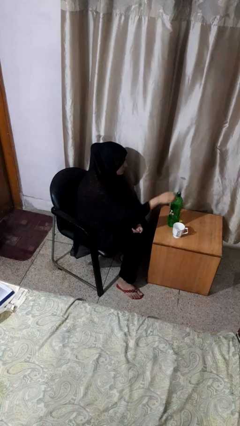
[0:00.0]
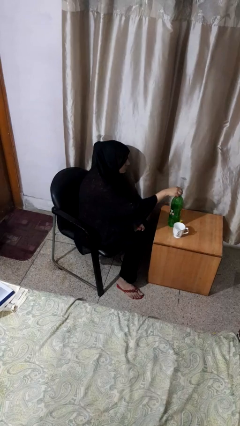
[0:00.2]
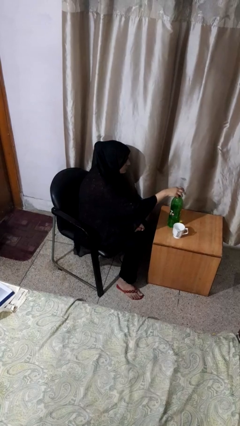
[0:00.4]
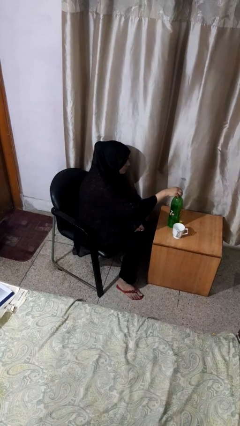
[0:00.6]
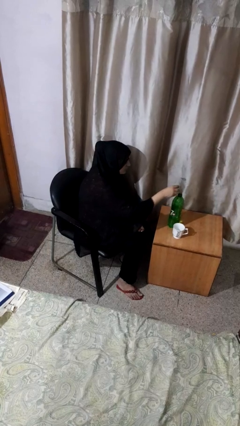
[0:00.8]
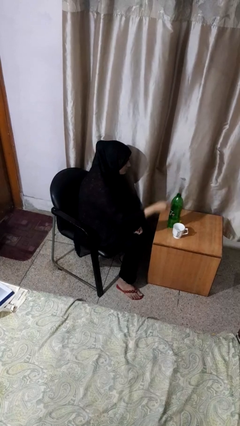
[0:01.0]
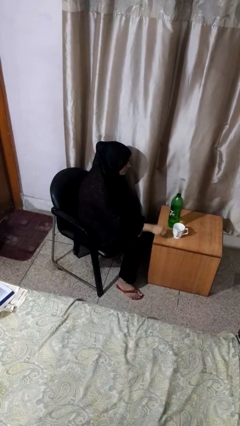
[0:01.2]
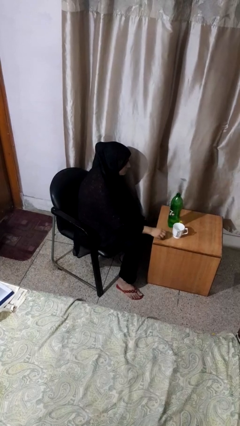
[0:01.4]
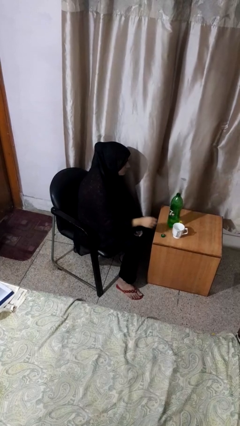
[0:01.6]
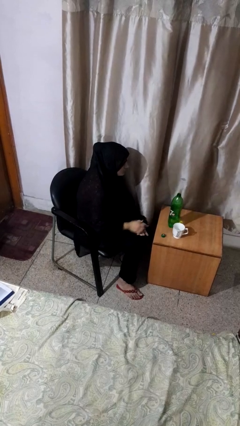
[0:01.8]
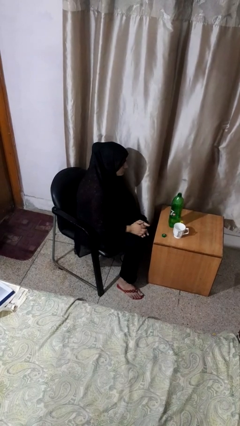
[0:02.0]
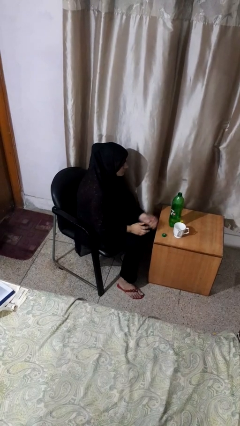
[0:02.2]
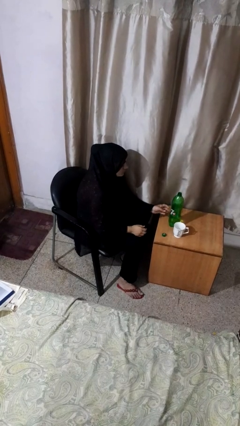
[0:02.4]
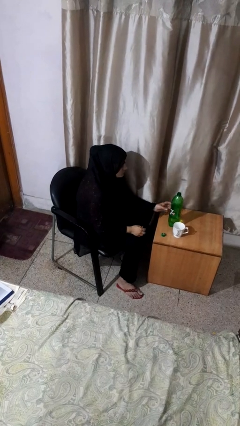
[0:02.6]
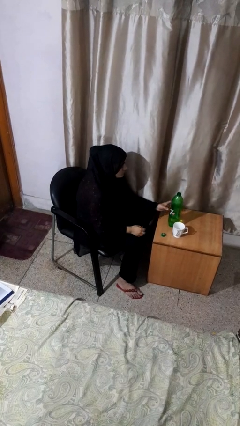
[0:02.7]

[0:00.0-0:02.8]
person unscrews lid from bottle

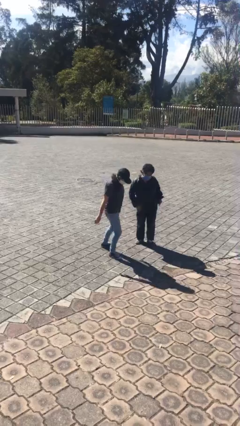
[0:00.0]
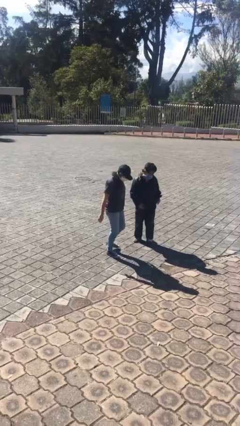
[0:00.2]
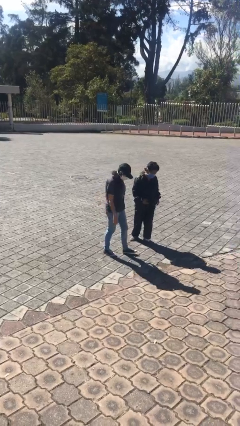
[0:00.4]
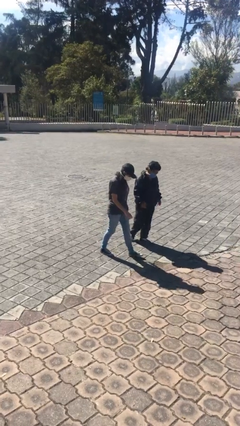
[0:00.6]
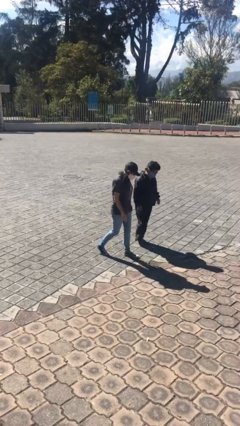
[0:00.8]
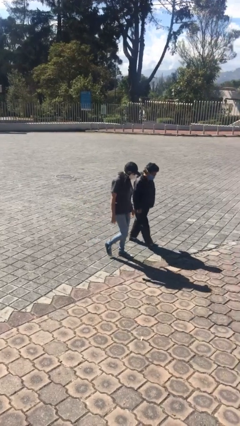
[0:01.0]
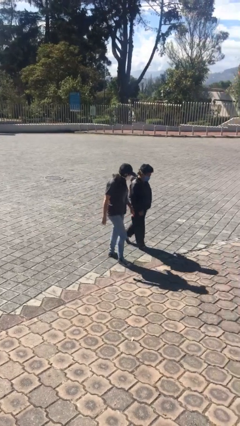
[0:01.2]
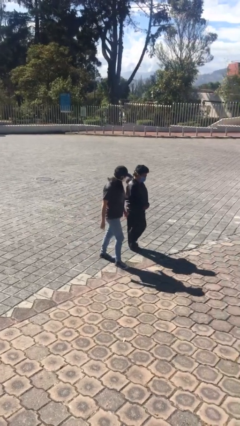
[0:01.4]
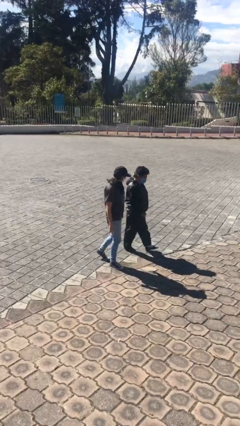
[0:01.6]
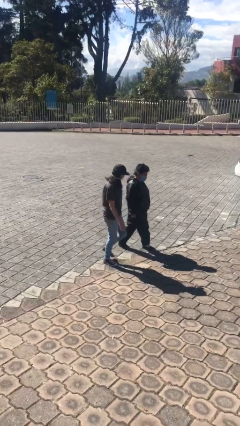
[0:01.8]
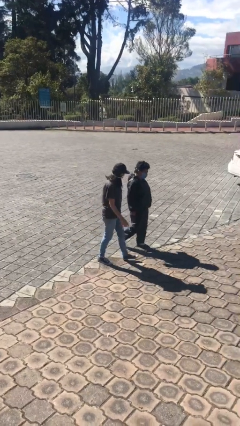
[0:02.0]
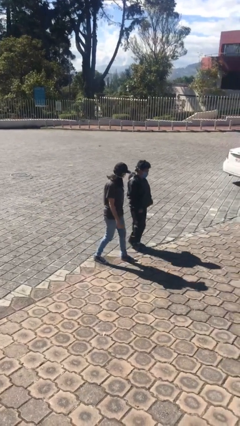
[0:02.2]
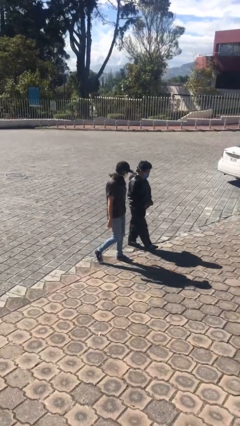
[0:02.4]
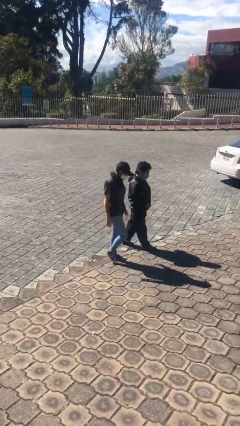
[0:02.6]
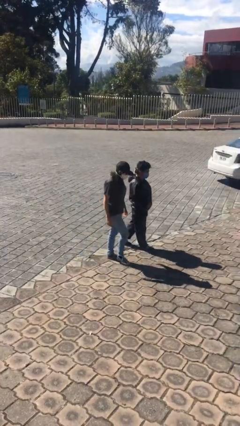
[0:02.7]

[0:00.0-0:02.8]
person talks to person

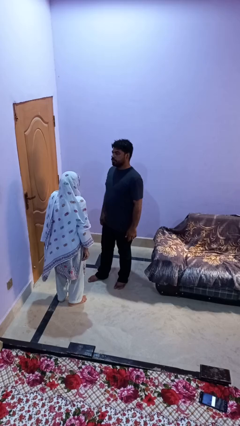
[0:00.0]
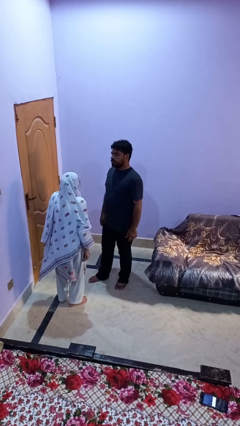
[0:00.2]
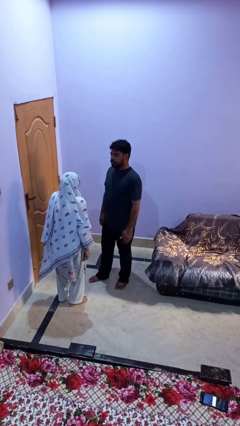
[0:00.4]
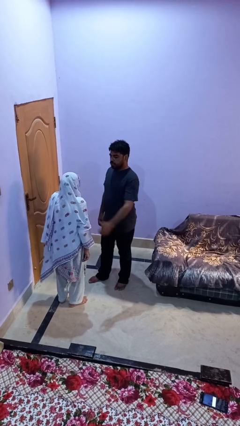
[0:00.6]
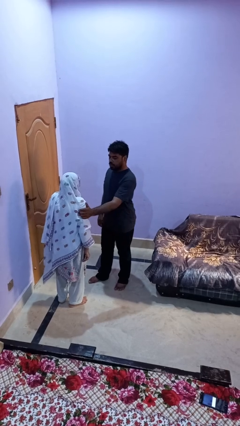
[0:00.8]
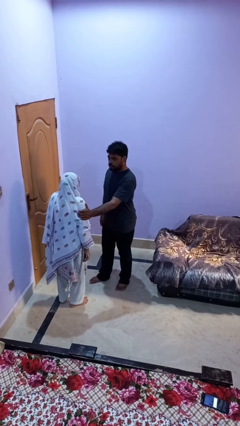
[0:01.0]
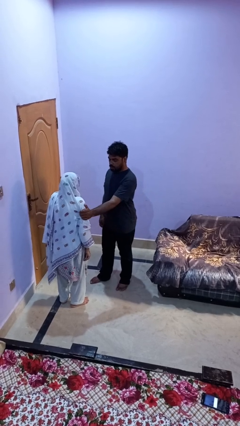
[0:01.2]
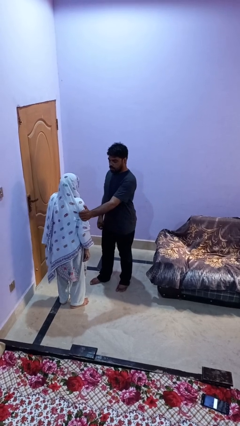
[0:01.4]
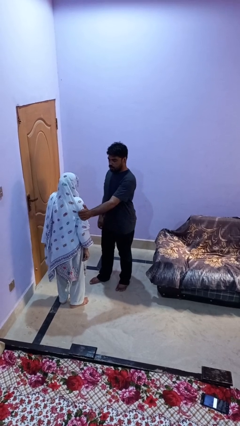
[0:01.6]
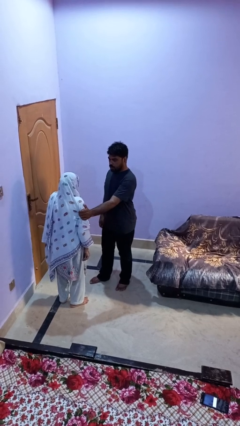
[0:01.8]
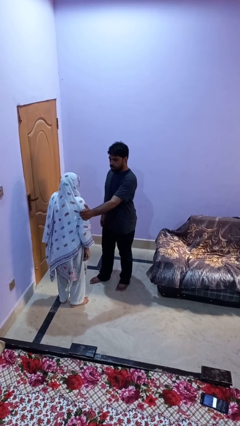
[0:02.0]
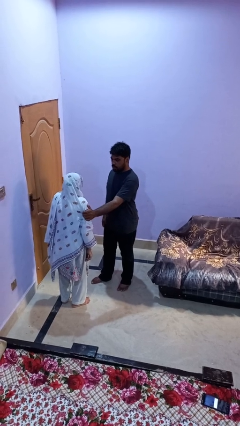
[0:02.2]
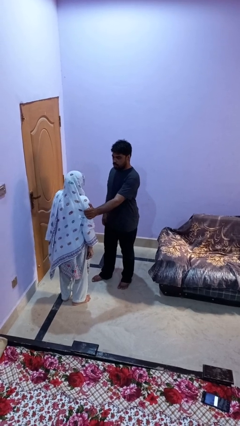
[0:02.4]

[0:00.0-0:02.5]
person grabs person by bicep

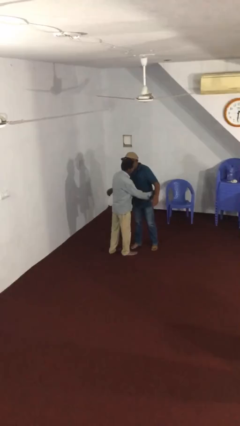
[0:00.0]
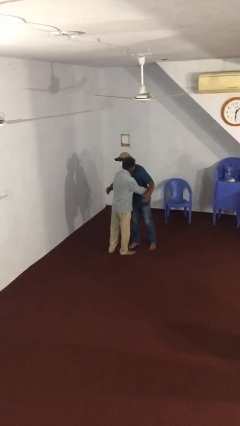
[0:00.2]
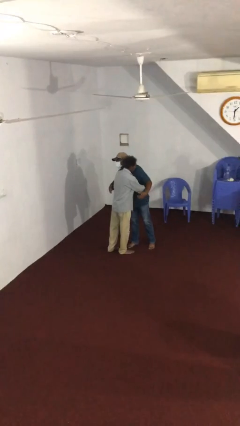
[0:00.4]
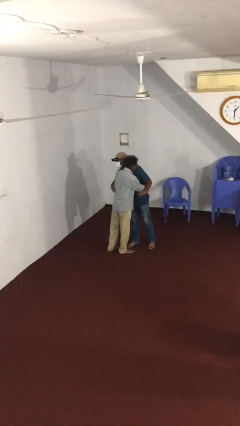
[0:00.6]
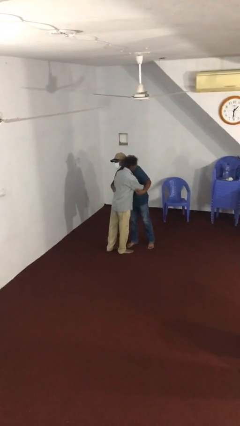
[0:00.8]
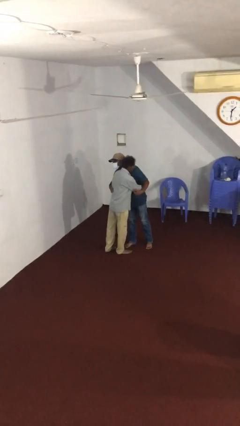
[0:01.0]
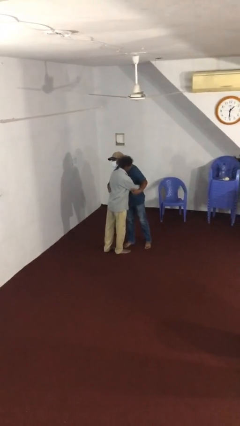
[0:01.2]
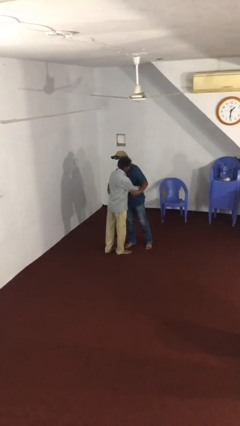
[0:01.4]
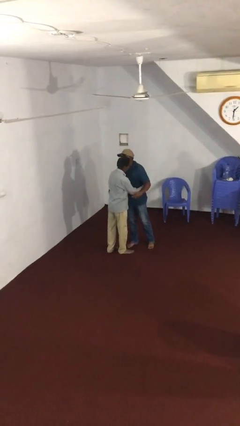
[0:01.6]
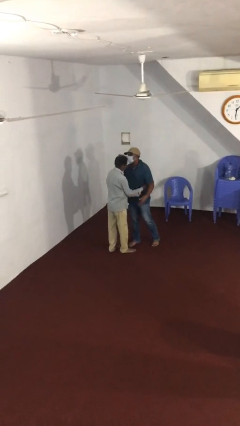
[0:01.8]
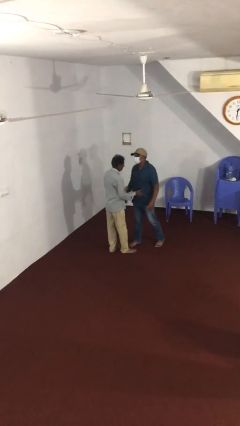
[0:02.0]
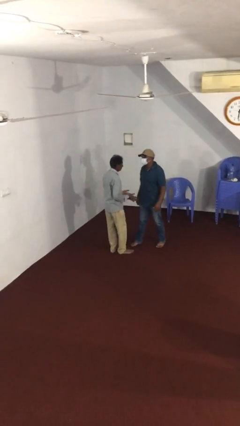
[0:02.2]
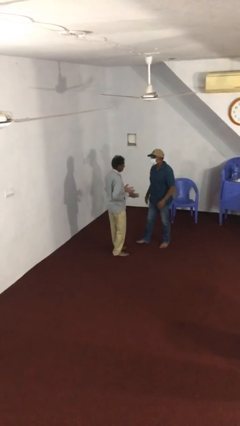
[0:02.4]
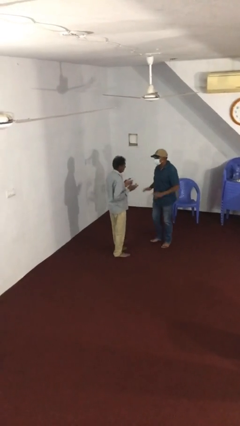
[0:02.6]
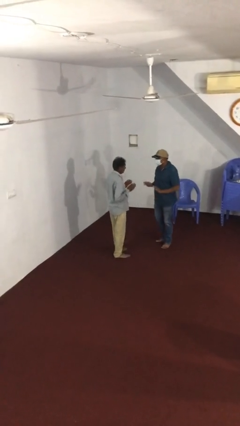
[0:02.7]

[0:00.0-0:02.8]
person embraces person

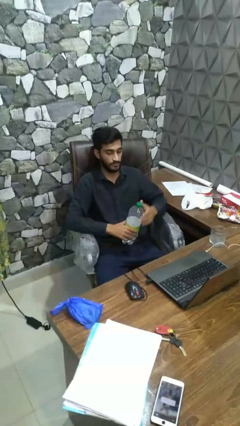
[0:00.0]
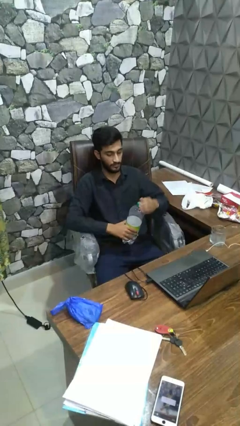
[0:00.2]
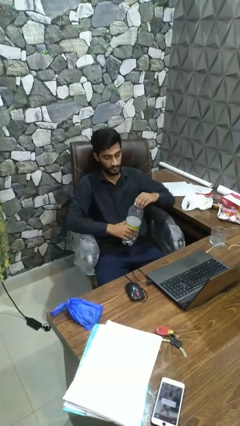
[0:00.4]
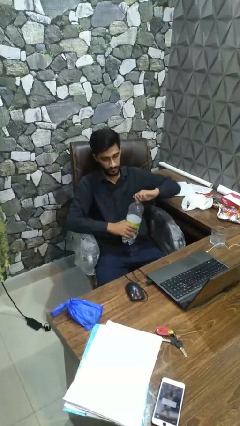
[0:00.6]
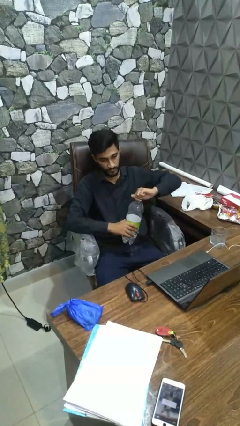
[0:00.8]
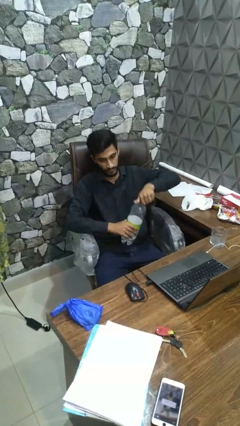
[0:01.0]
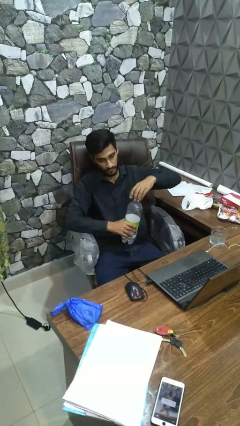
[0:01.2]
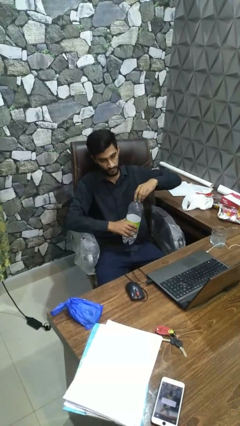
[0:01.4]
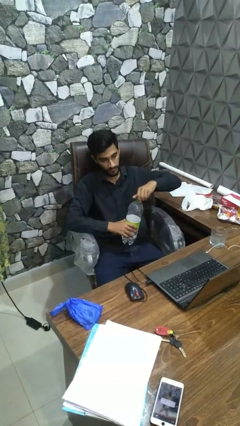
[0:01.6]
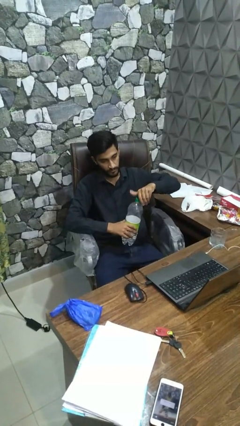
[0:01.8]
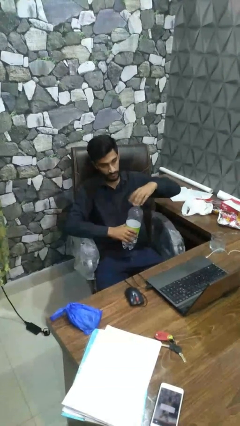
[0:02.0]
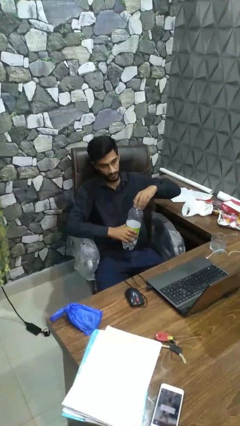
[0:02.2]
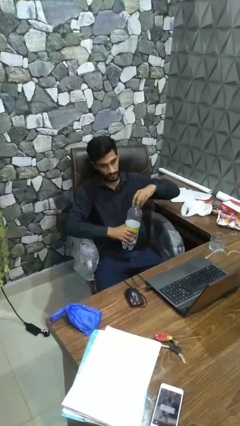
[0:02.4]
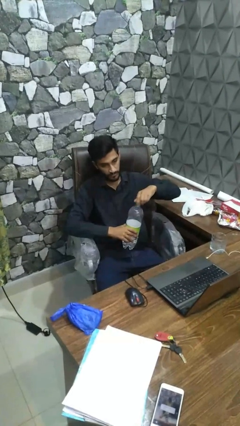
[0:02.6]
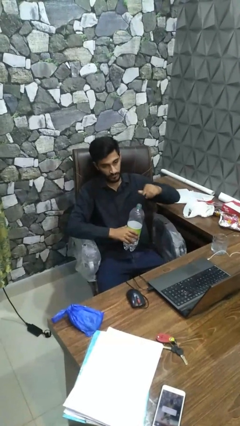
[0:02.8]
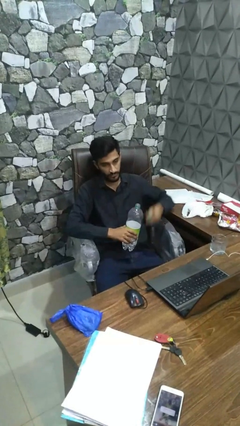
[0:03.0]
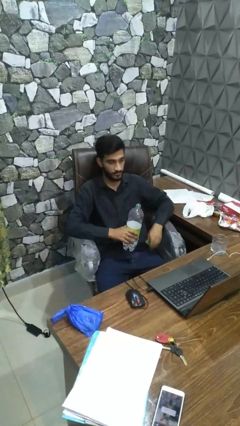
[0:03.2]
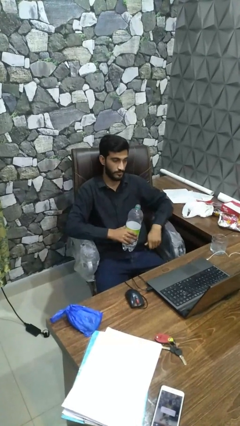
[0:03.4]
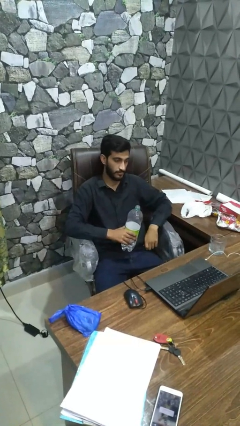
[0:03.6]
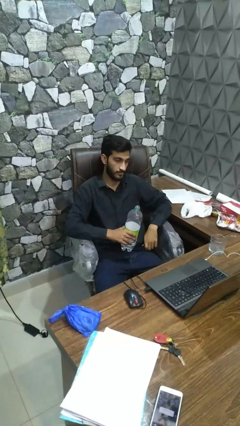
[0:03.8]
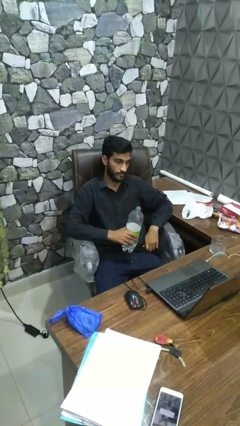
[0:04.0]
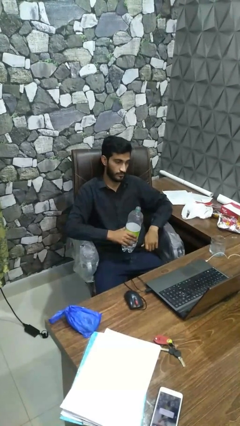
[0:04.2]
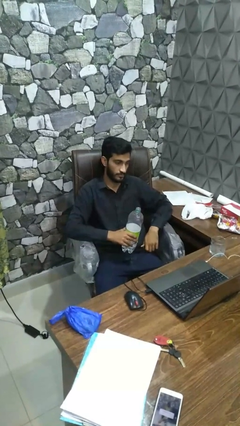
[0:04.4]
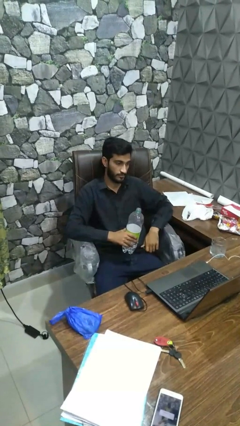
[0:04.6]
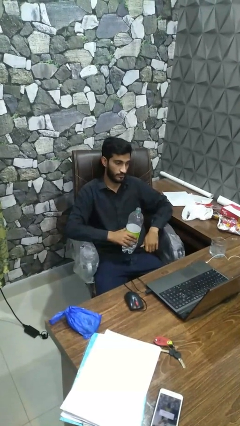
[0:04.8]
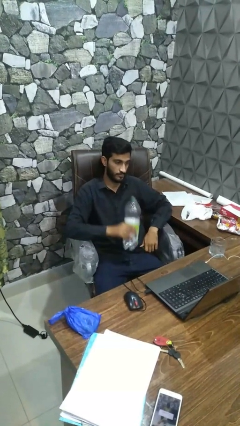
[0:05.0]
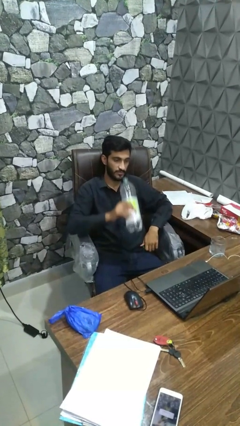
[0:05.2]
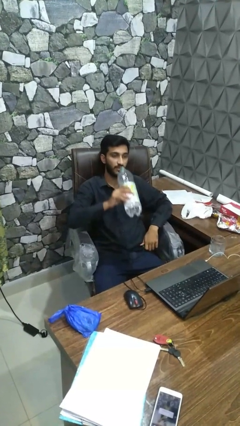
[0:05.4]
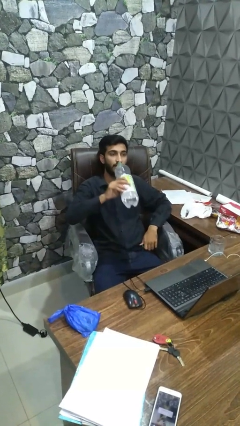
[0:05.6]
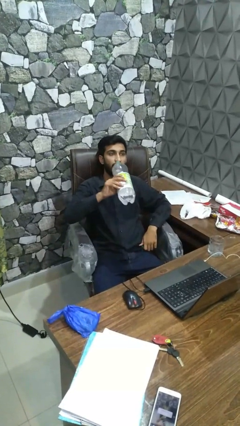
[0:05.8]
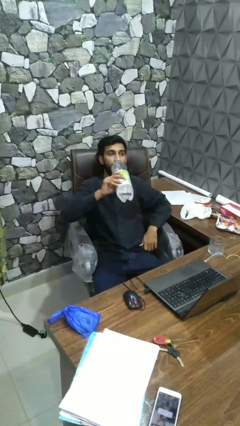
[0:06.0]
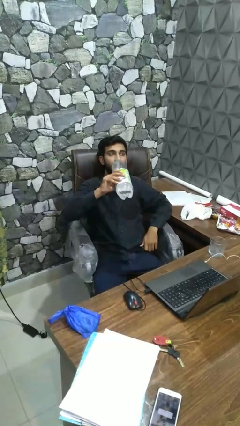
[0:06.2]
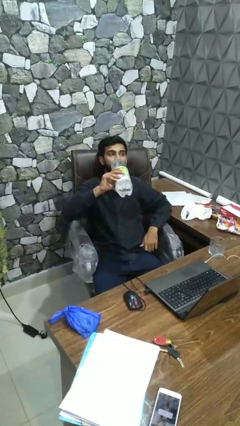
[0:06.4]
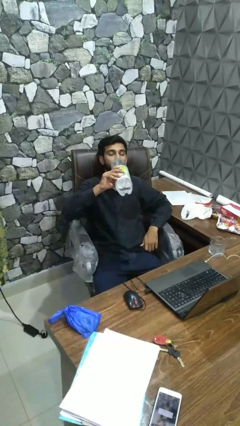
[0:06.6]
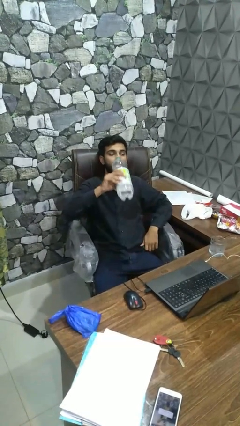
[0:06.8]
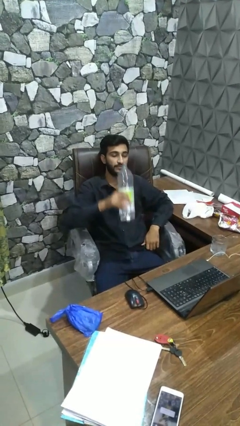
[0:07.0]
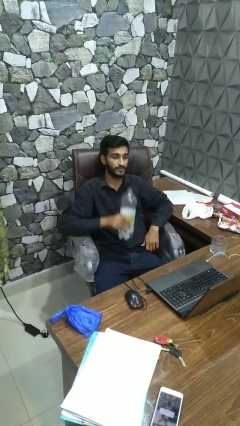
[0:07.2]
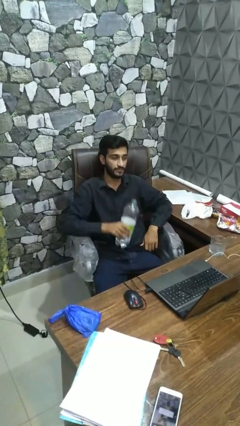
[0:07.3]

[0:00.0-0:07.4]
person drinks from bottle
